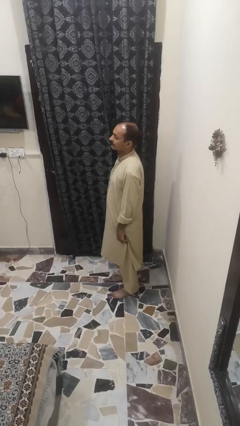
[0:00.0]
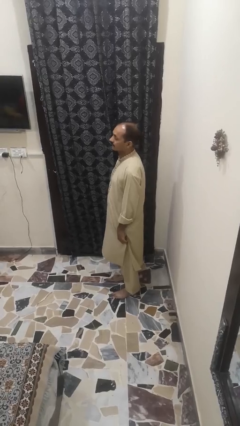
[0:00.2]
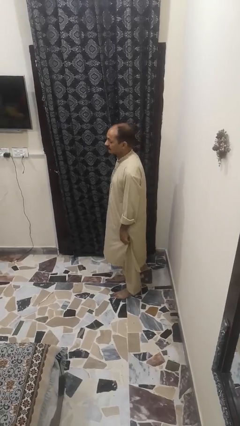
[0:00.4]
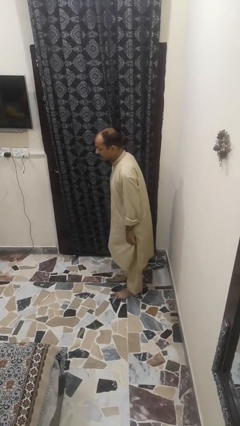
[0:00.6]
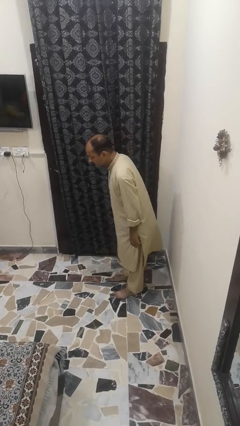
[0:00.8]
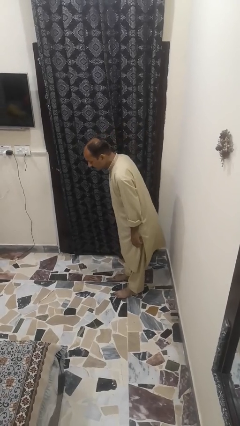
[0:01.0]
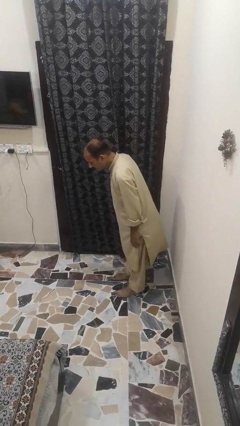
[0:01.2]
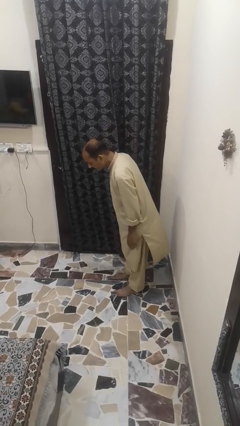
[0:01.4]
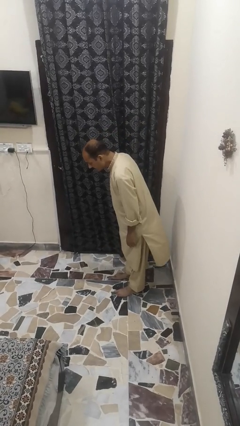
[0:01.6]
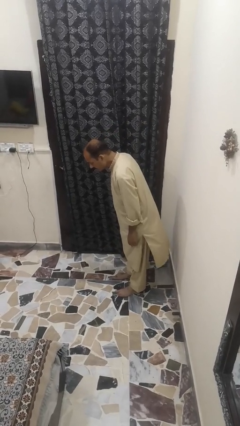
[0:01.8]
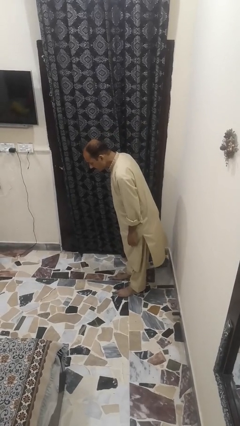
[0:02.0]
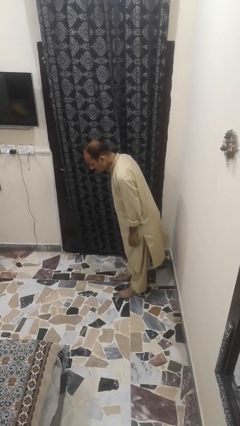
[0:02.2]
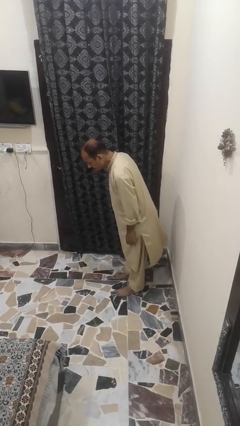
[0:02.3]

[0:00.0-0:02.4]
person bows

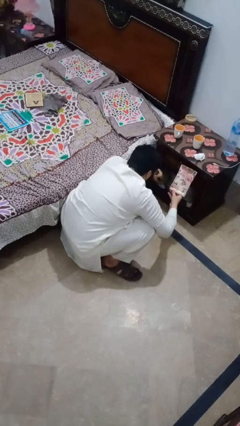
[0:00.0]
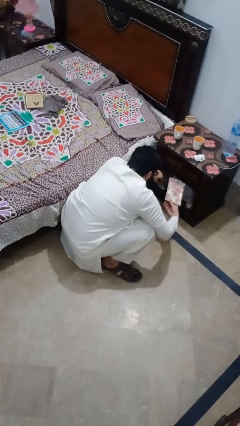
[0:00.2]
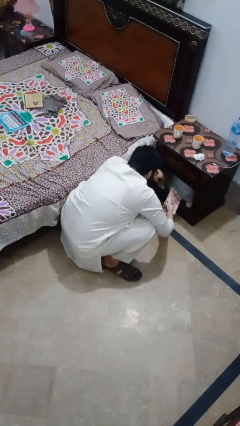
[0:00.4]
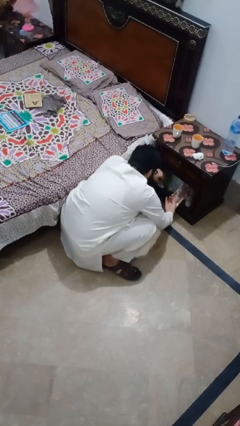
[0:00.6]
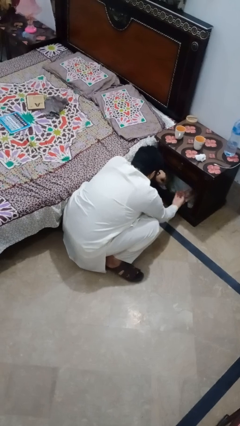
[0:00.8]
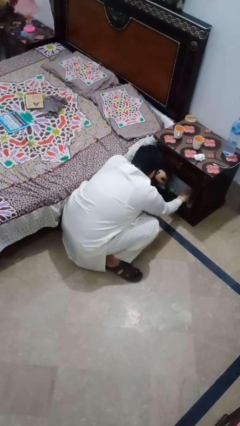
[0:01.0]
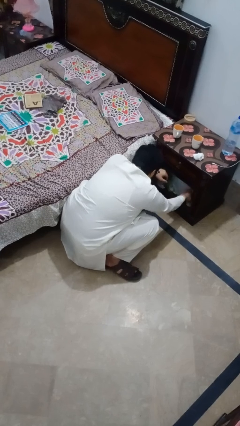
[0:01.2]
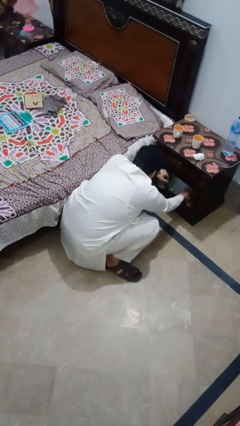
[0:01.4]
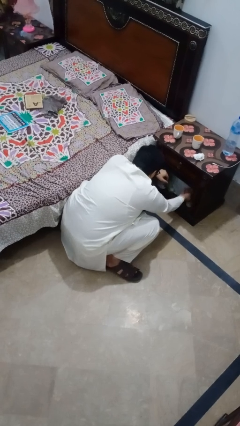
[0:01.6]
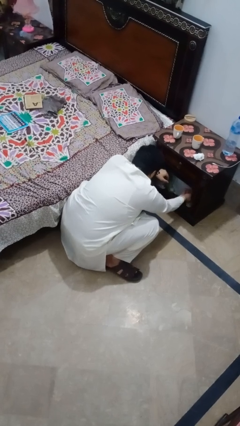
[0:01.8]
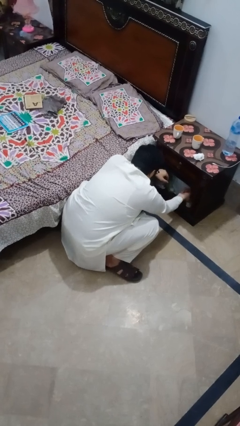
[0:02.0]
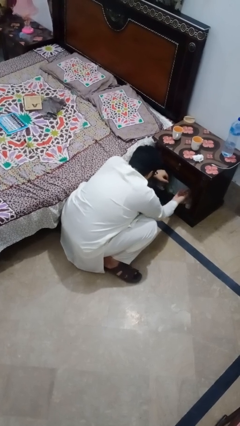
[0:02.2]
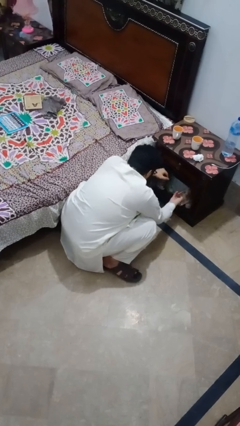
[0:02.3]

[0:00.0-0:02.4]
person puts down object into cabinet

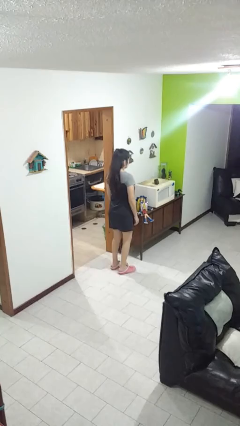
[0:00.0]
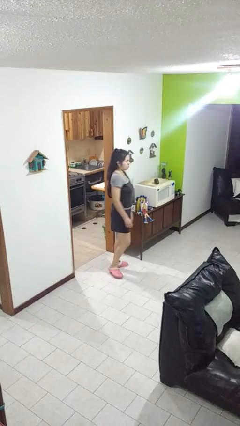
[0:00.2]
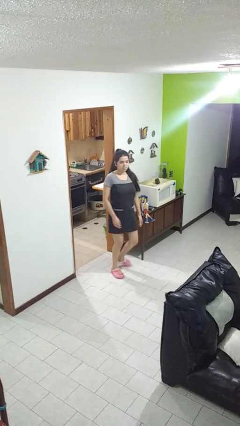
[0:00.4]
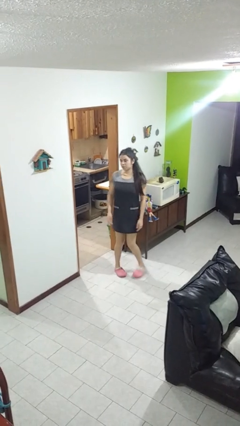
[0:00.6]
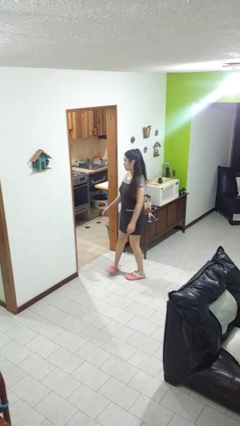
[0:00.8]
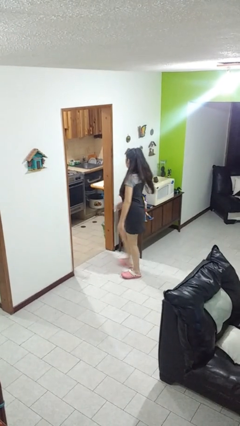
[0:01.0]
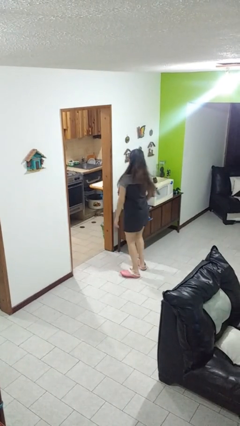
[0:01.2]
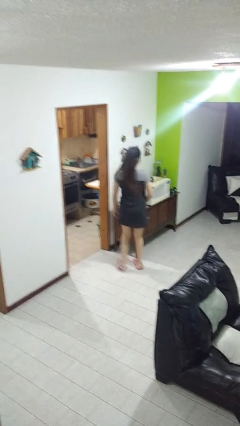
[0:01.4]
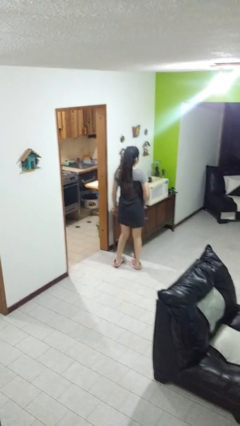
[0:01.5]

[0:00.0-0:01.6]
person twirls

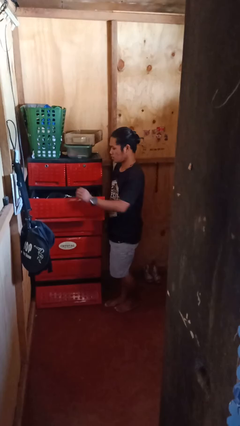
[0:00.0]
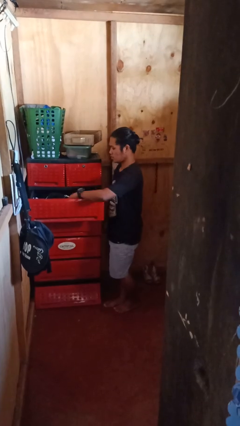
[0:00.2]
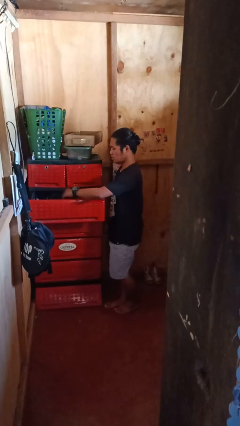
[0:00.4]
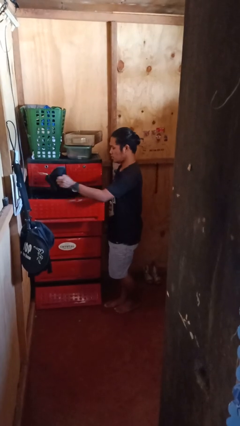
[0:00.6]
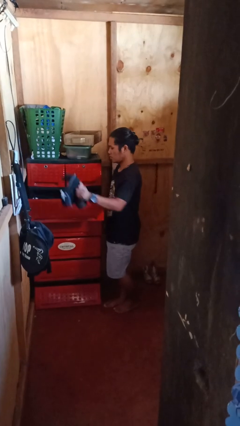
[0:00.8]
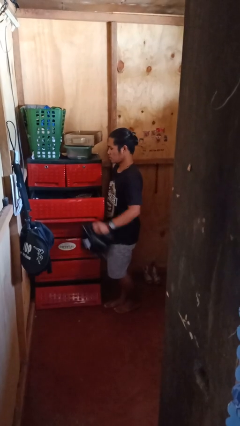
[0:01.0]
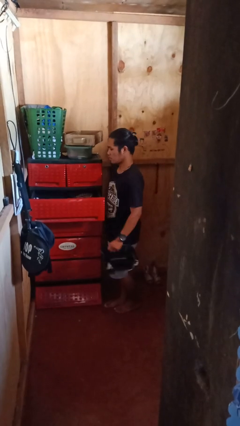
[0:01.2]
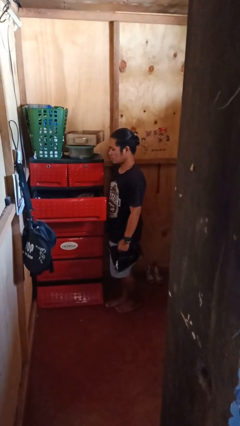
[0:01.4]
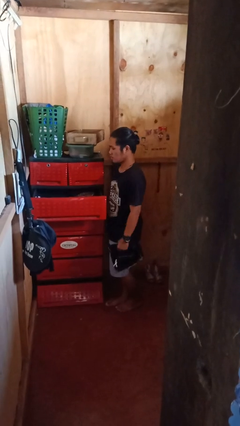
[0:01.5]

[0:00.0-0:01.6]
person takes clothes from dresser

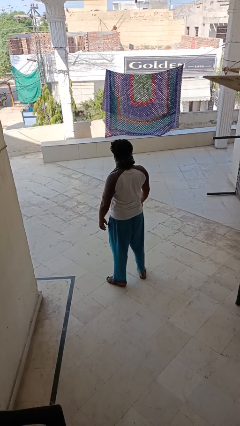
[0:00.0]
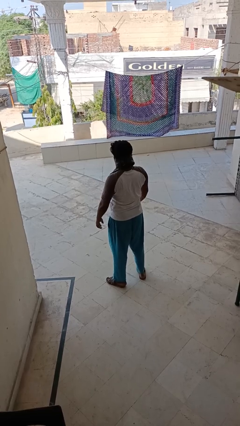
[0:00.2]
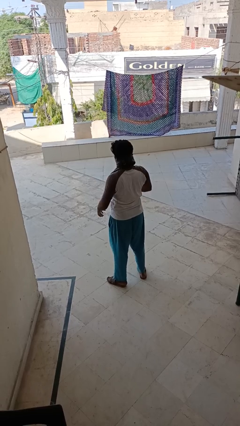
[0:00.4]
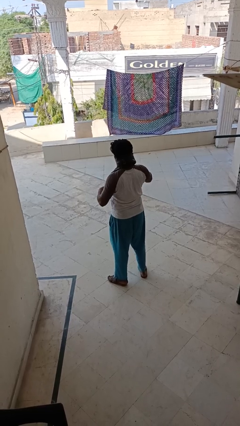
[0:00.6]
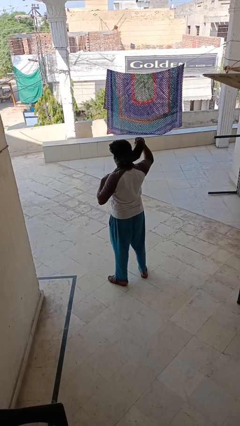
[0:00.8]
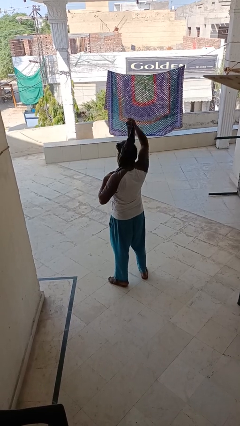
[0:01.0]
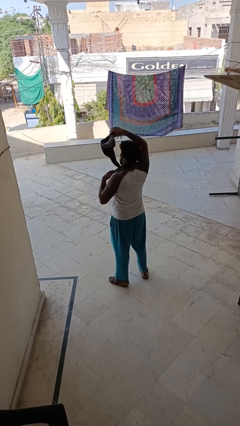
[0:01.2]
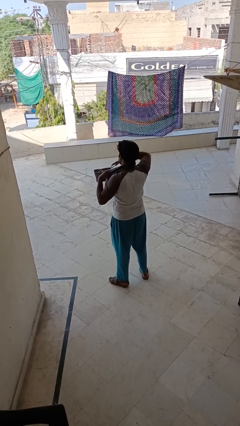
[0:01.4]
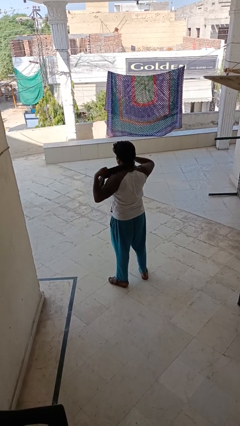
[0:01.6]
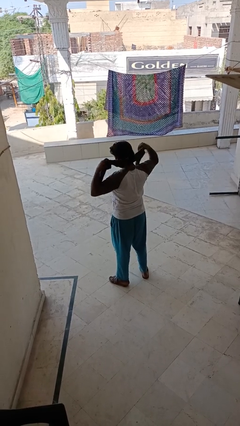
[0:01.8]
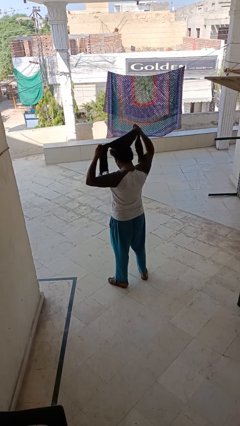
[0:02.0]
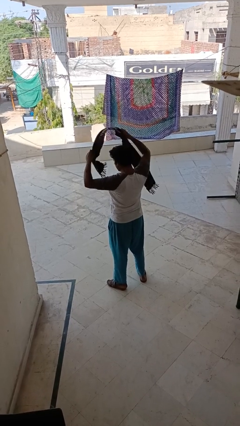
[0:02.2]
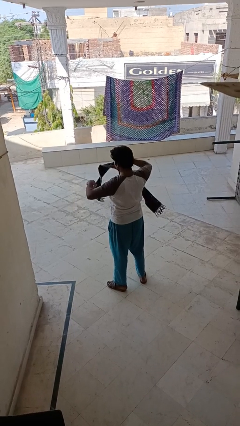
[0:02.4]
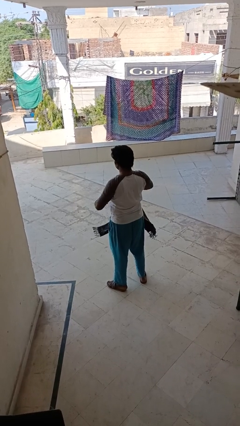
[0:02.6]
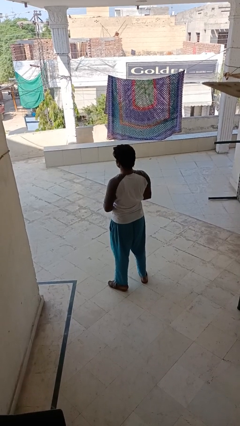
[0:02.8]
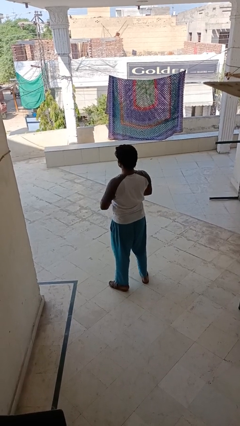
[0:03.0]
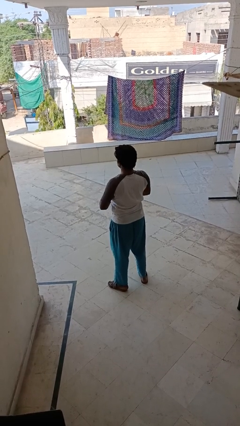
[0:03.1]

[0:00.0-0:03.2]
person takes off scarf

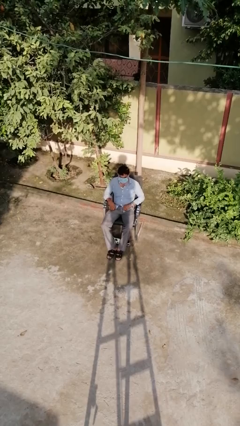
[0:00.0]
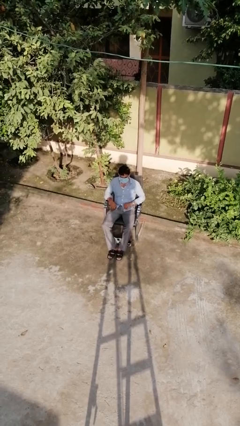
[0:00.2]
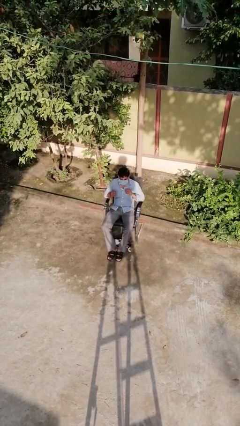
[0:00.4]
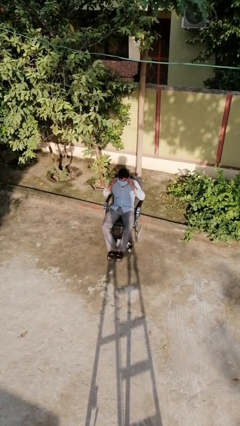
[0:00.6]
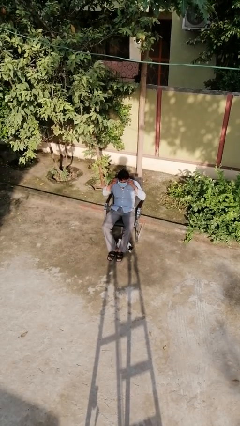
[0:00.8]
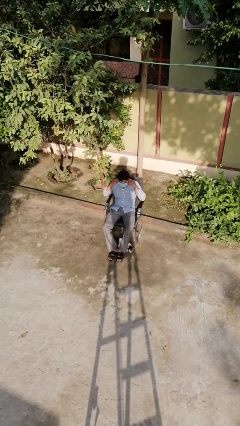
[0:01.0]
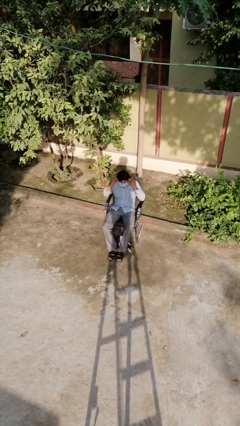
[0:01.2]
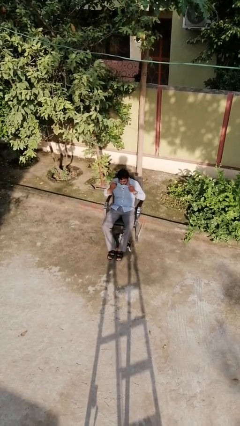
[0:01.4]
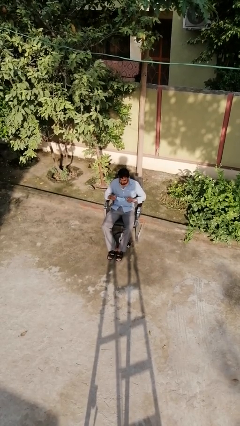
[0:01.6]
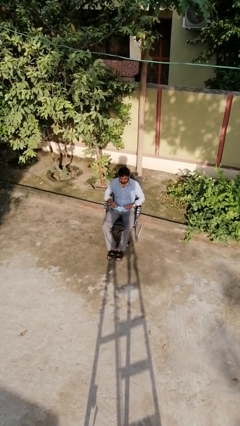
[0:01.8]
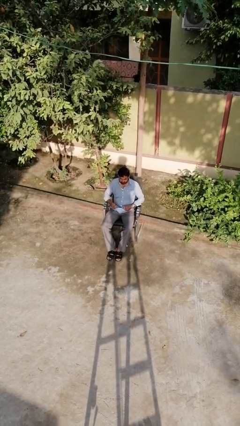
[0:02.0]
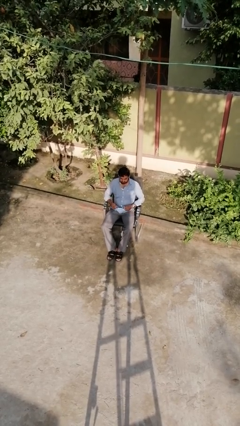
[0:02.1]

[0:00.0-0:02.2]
person takes off facemask

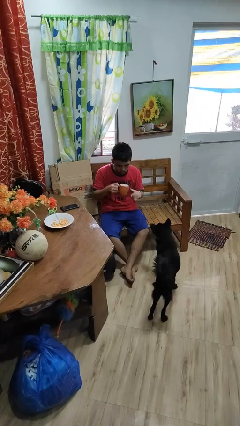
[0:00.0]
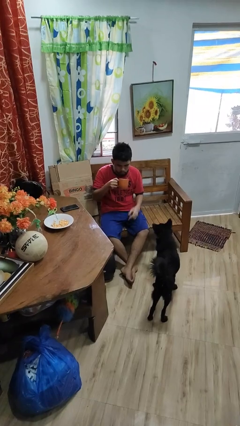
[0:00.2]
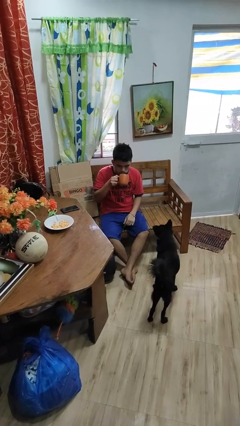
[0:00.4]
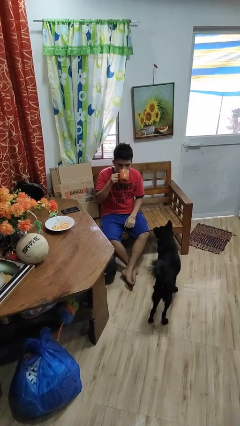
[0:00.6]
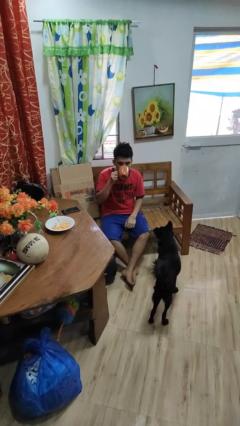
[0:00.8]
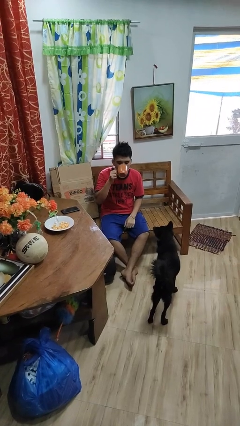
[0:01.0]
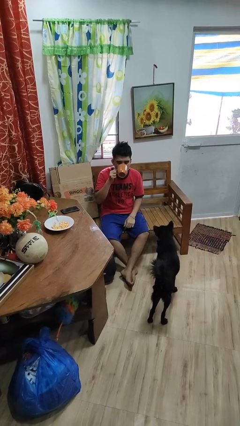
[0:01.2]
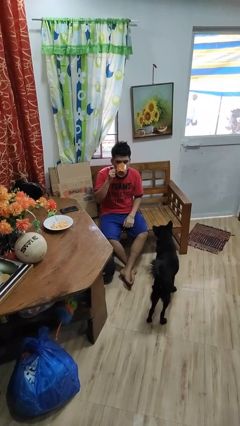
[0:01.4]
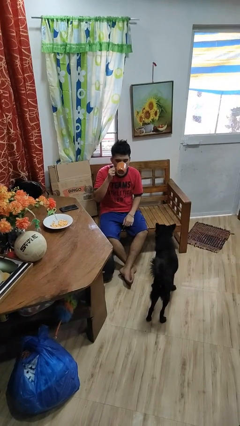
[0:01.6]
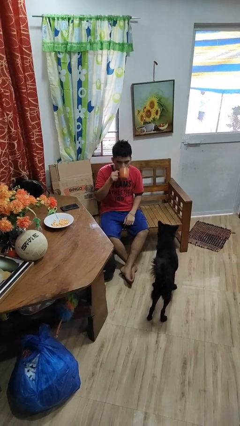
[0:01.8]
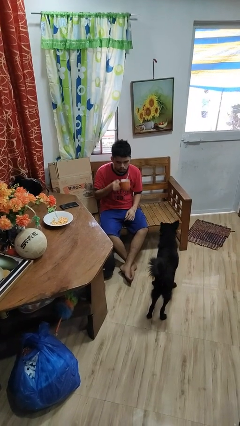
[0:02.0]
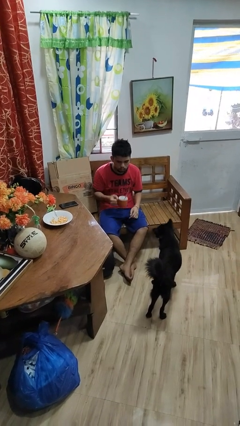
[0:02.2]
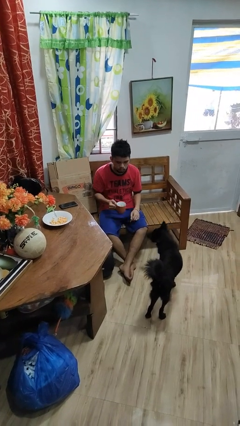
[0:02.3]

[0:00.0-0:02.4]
person drinks from mug

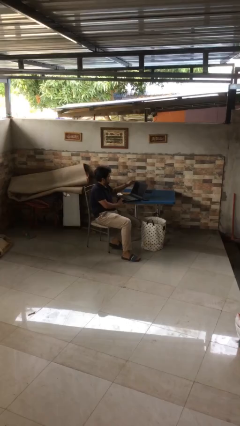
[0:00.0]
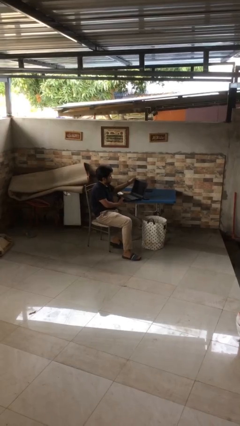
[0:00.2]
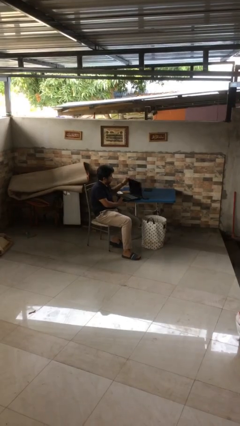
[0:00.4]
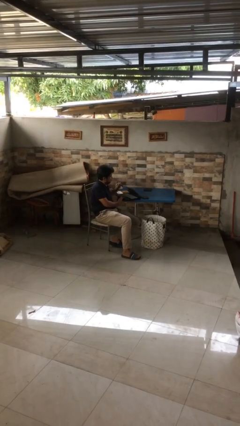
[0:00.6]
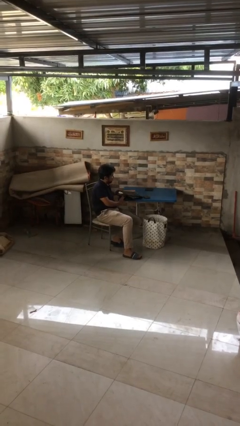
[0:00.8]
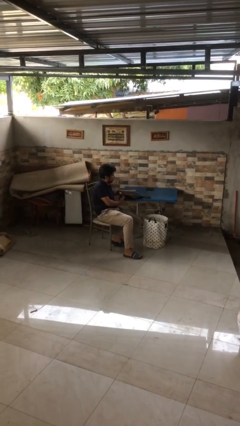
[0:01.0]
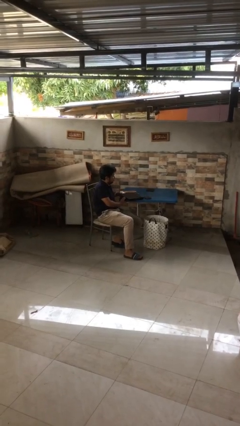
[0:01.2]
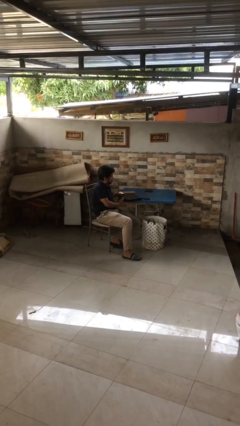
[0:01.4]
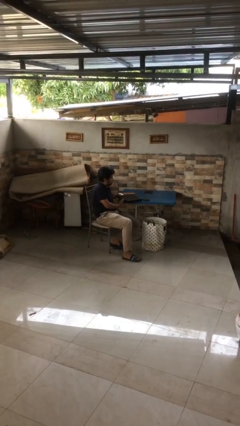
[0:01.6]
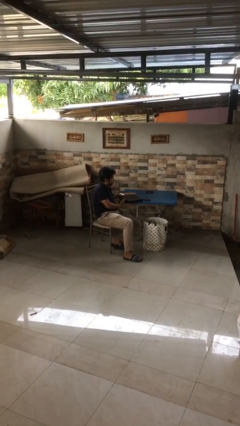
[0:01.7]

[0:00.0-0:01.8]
person closes laptop
